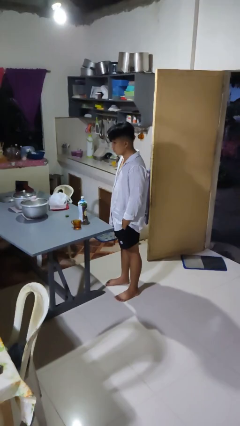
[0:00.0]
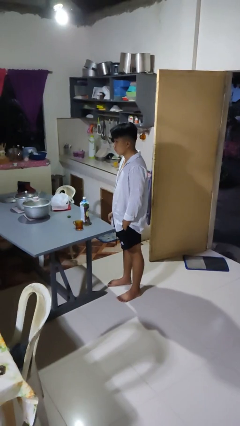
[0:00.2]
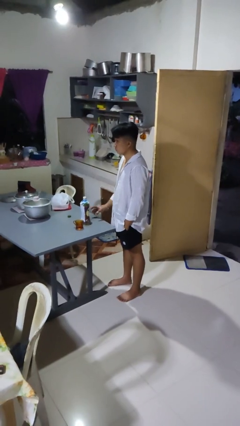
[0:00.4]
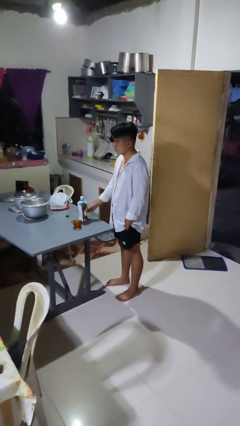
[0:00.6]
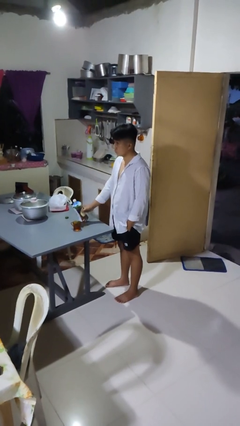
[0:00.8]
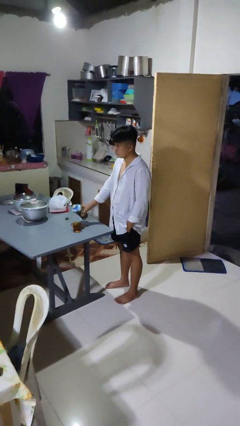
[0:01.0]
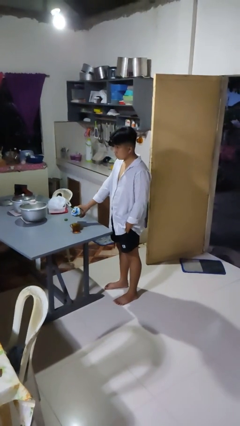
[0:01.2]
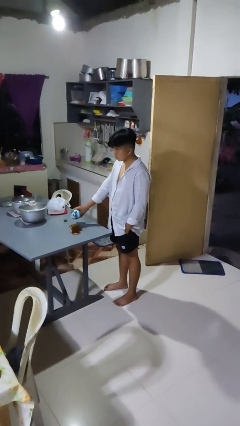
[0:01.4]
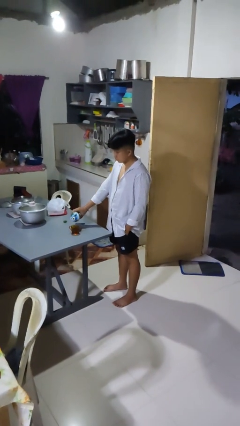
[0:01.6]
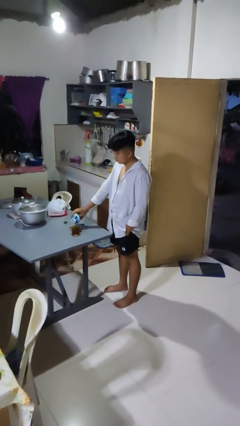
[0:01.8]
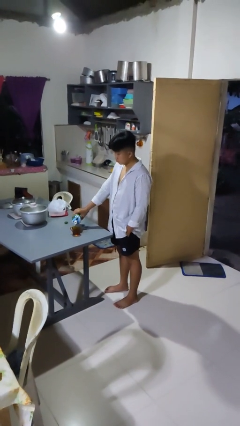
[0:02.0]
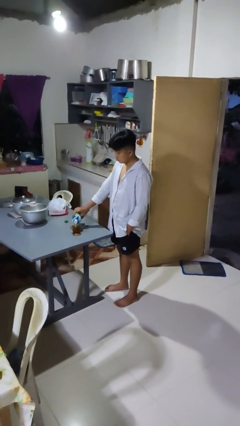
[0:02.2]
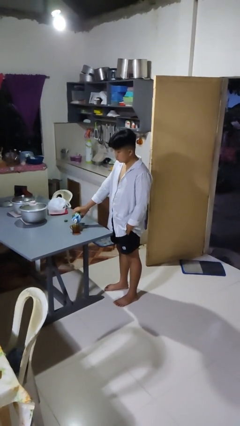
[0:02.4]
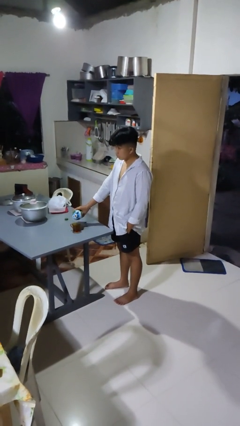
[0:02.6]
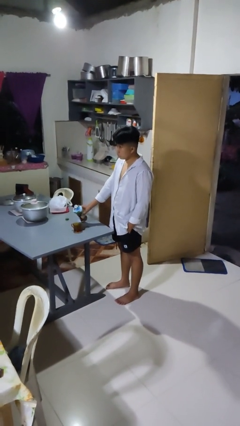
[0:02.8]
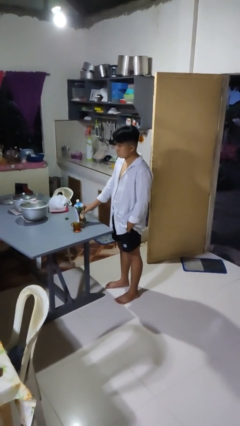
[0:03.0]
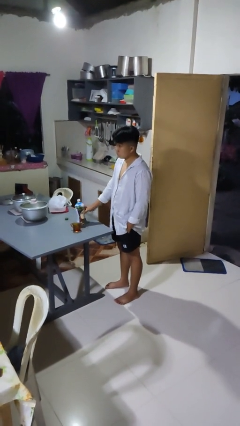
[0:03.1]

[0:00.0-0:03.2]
person pours liquid into cup

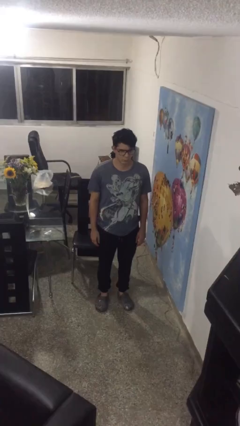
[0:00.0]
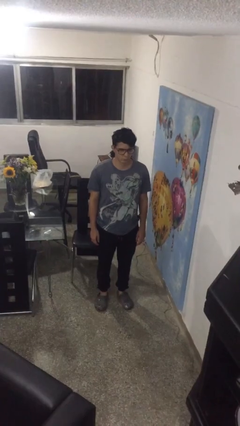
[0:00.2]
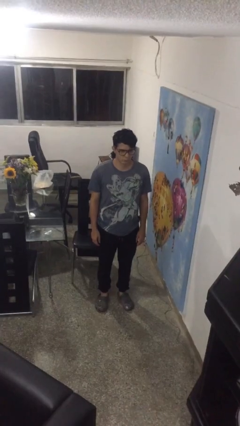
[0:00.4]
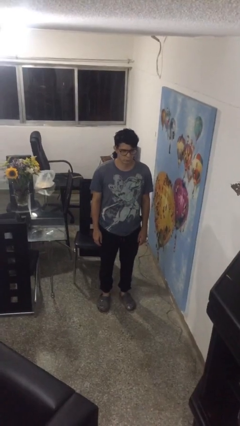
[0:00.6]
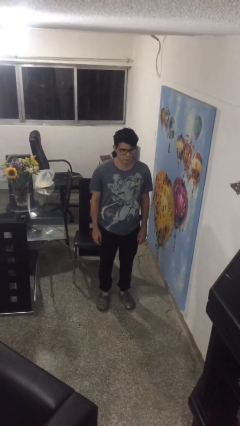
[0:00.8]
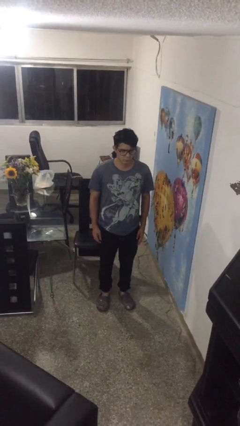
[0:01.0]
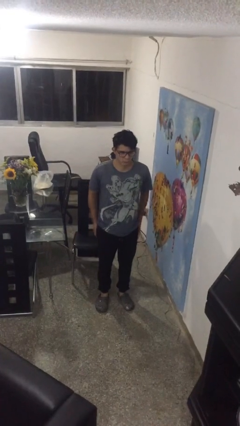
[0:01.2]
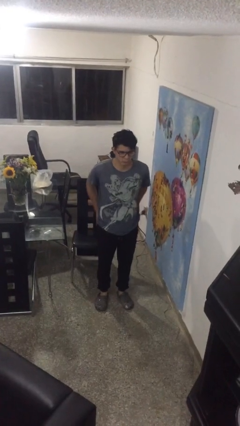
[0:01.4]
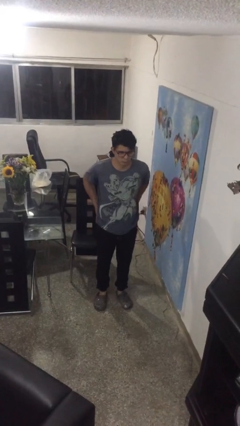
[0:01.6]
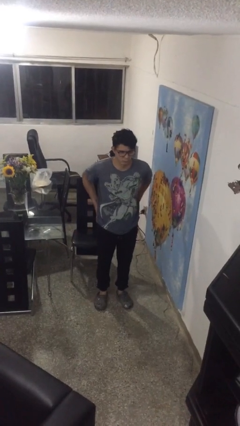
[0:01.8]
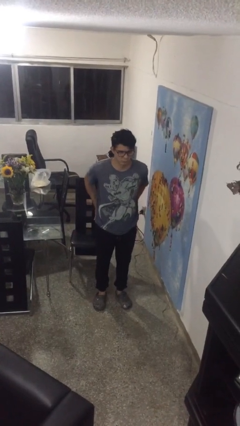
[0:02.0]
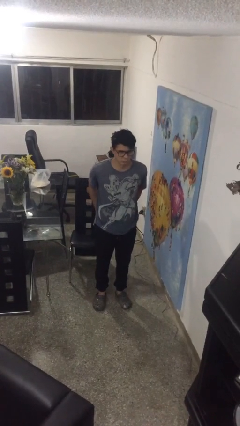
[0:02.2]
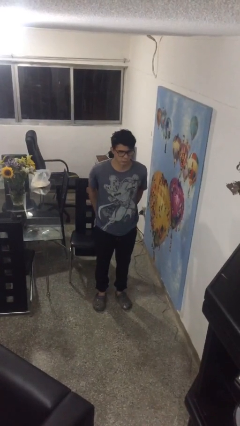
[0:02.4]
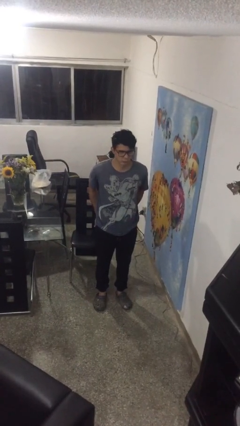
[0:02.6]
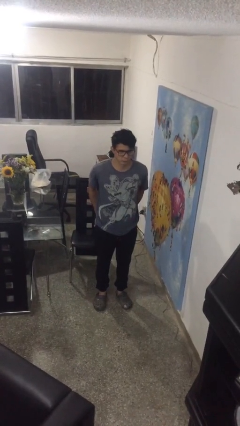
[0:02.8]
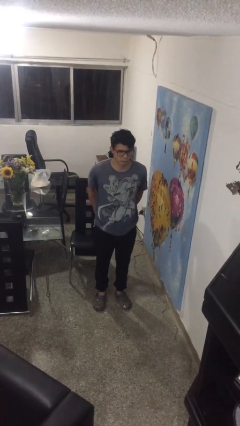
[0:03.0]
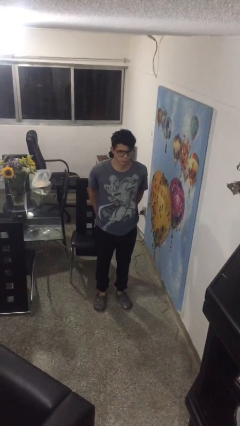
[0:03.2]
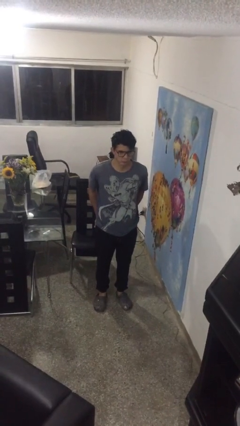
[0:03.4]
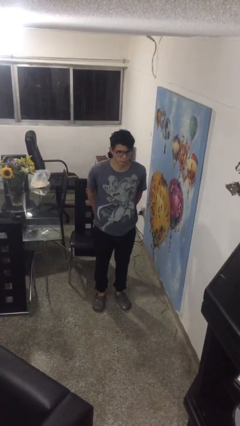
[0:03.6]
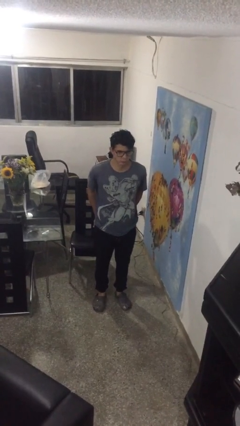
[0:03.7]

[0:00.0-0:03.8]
person puts hands in back pockets

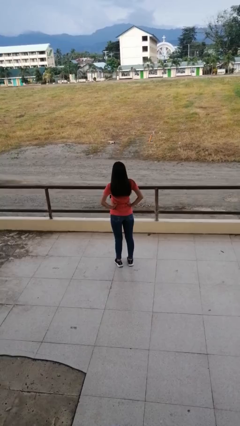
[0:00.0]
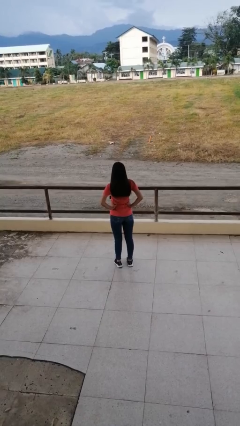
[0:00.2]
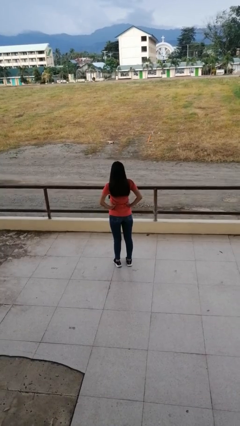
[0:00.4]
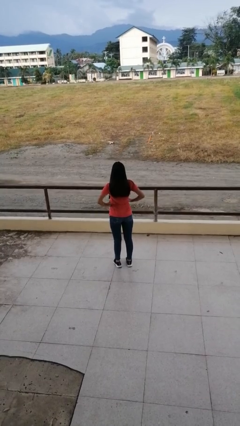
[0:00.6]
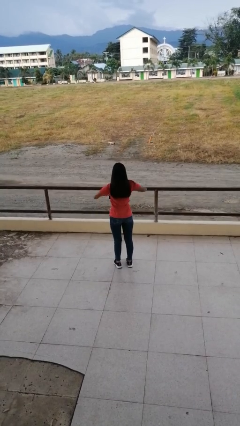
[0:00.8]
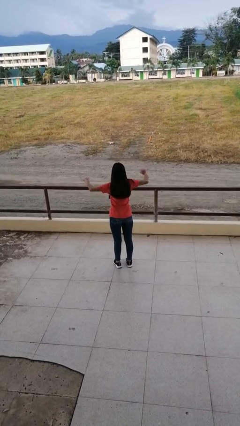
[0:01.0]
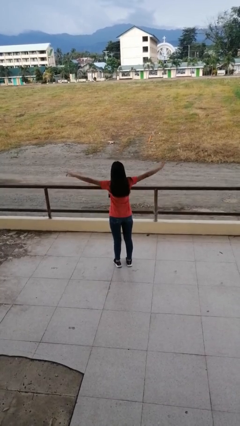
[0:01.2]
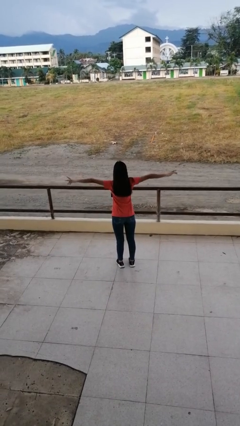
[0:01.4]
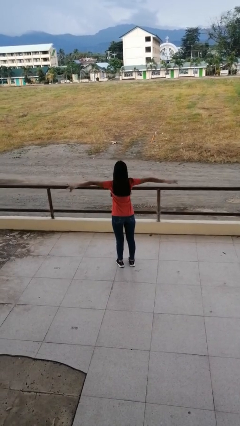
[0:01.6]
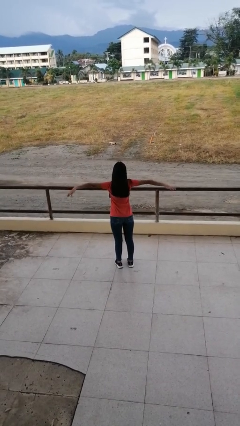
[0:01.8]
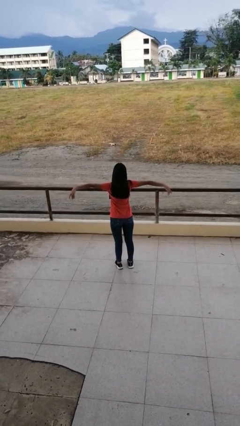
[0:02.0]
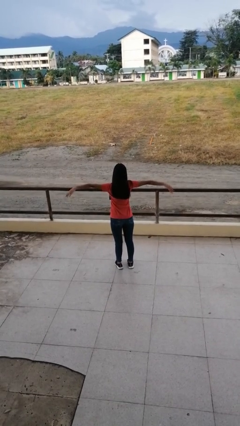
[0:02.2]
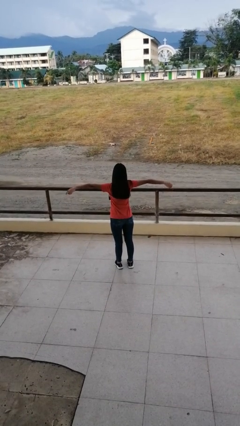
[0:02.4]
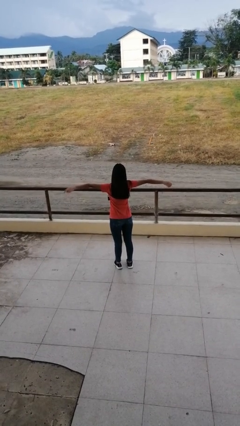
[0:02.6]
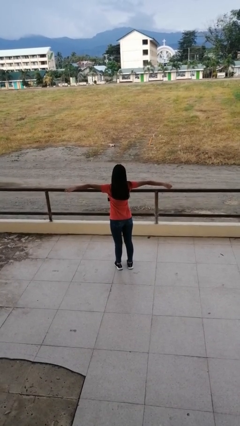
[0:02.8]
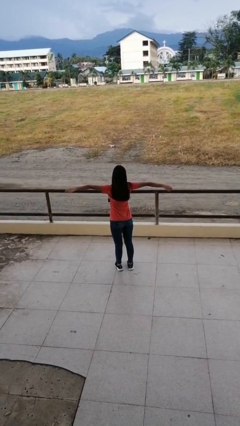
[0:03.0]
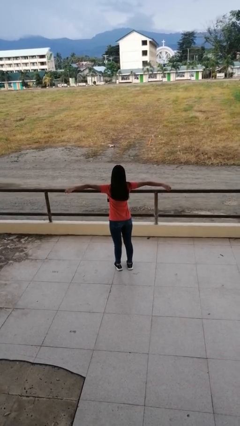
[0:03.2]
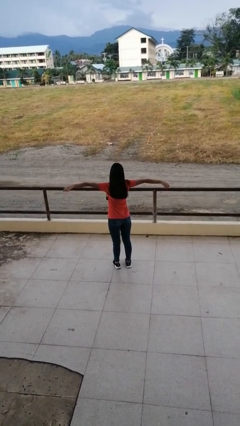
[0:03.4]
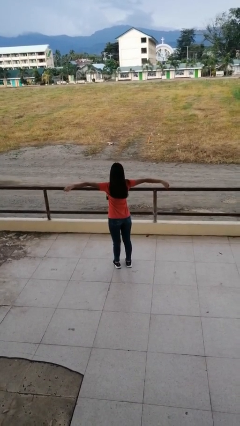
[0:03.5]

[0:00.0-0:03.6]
person stretches arms to side

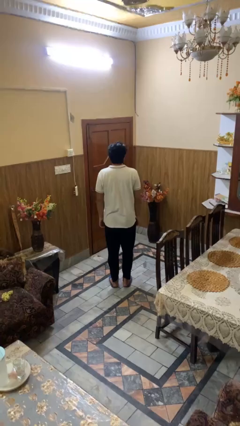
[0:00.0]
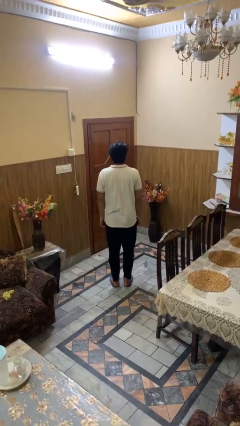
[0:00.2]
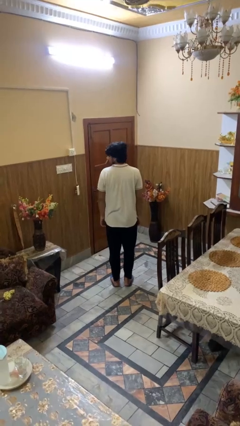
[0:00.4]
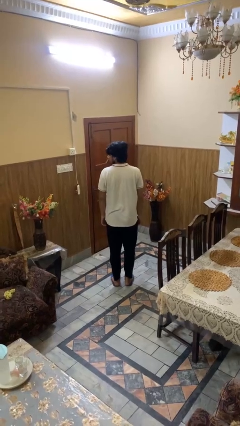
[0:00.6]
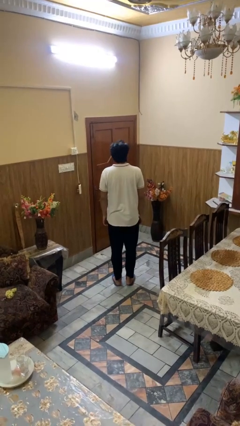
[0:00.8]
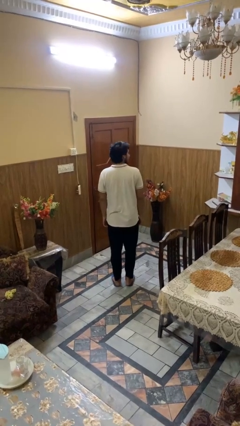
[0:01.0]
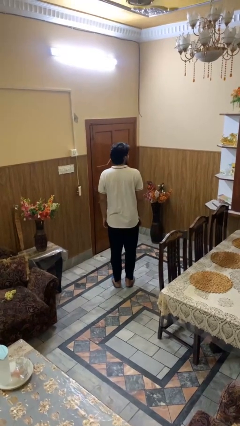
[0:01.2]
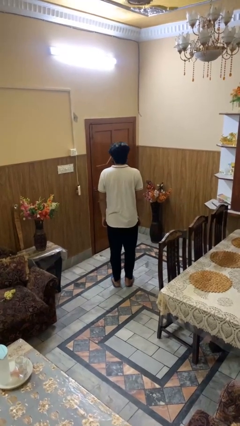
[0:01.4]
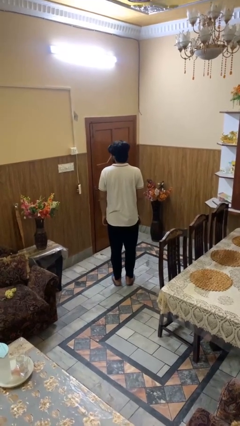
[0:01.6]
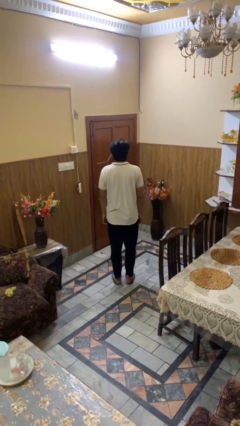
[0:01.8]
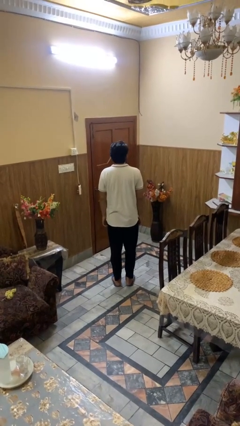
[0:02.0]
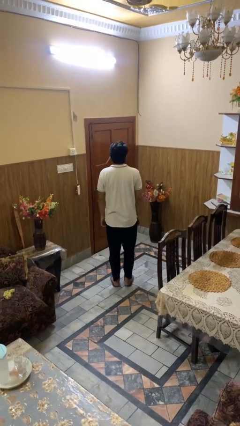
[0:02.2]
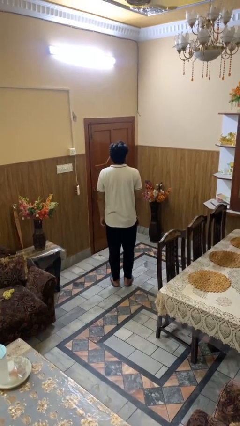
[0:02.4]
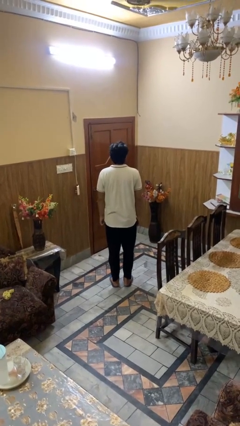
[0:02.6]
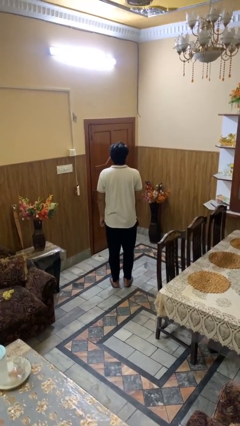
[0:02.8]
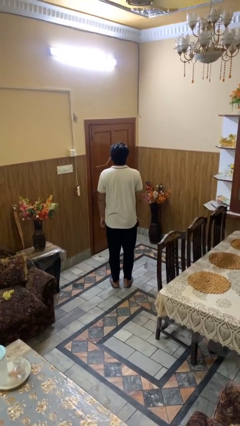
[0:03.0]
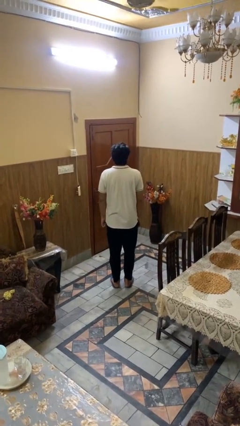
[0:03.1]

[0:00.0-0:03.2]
person shakes head

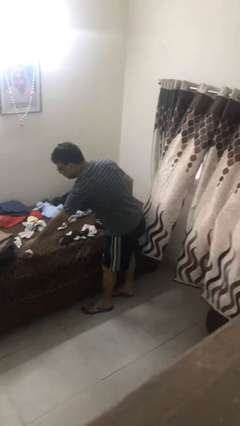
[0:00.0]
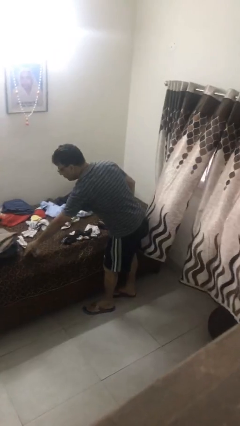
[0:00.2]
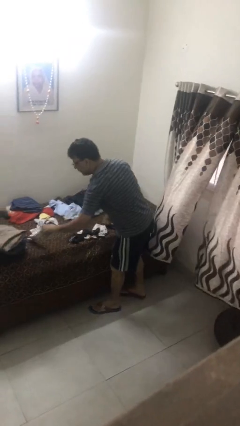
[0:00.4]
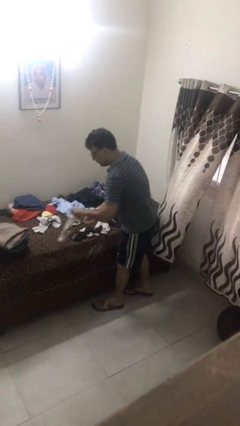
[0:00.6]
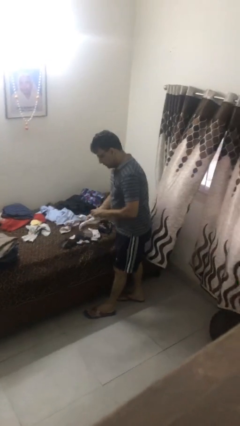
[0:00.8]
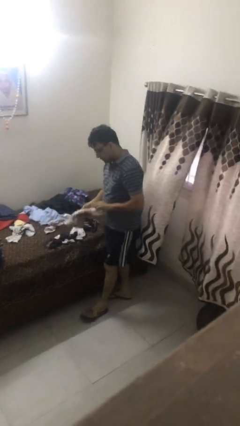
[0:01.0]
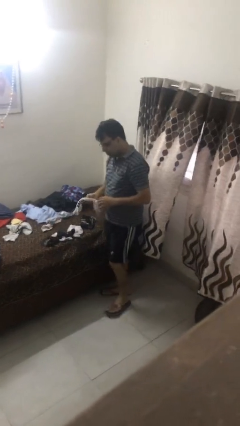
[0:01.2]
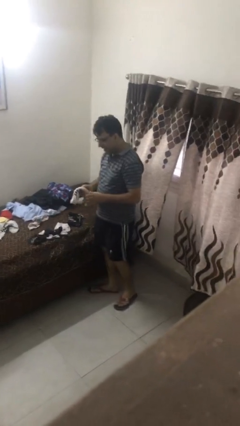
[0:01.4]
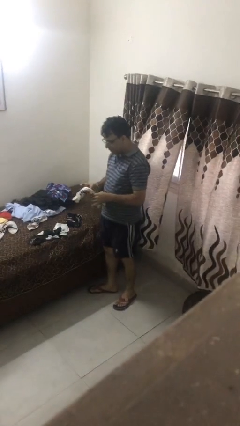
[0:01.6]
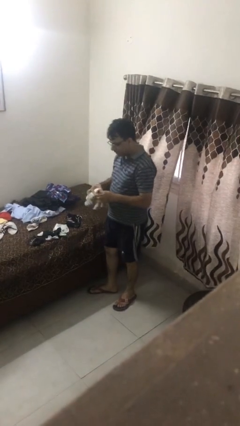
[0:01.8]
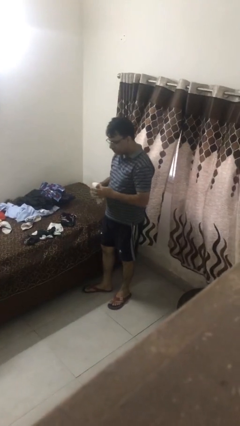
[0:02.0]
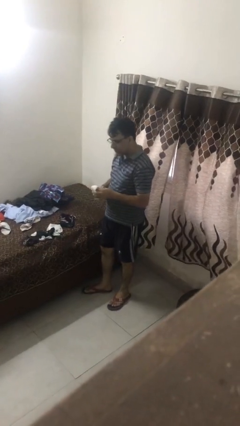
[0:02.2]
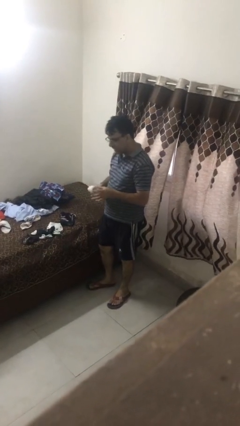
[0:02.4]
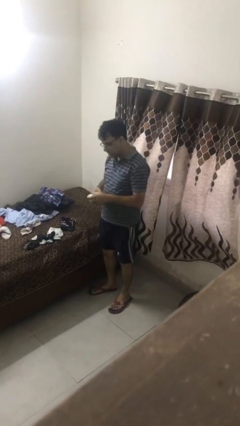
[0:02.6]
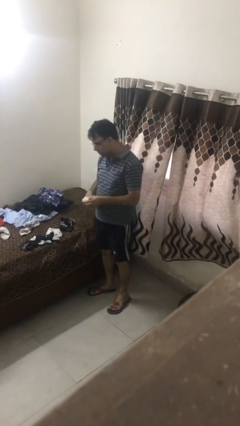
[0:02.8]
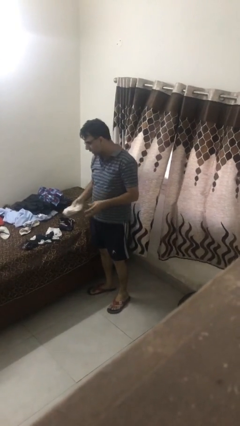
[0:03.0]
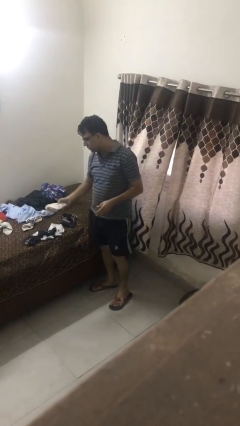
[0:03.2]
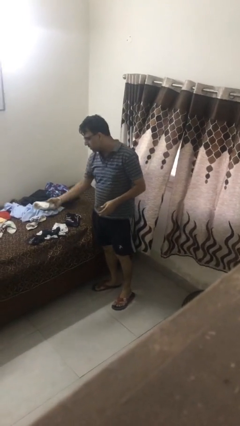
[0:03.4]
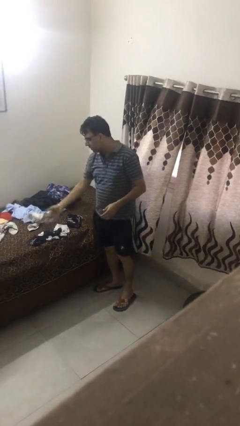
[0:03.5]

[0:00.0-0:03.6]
person folds socks

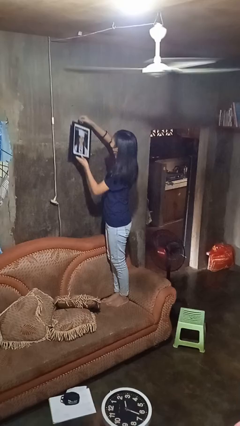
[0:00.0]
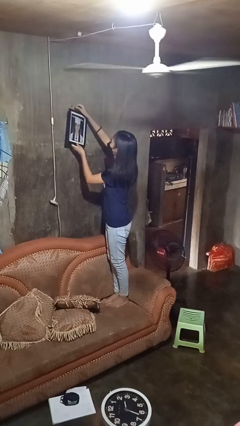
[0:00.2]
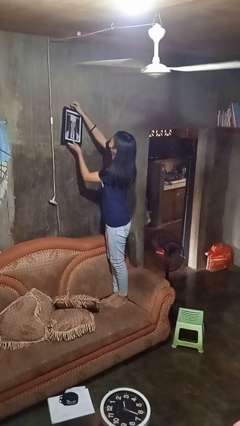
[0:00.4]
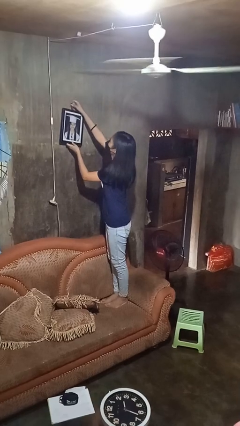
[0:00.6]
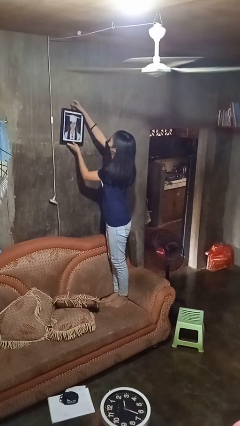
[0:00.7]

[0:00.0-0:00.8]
person puts up picture frame
